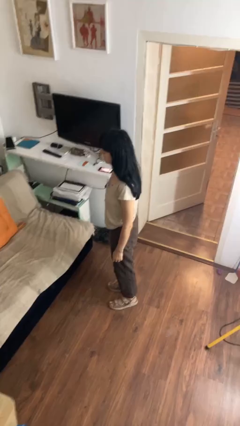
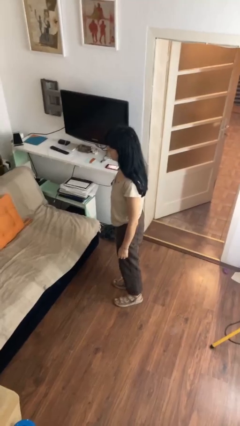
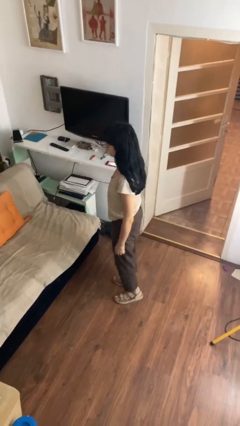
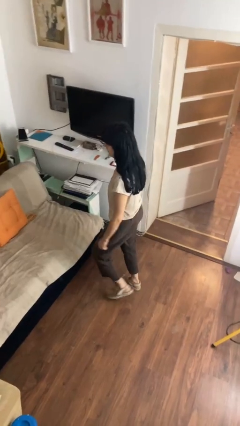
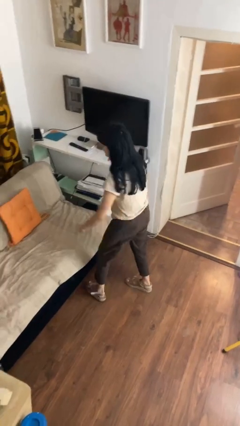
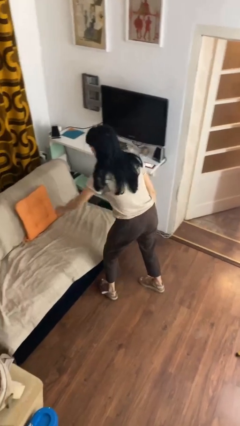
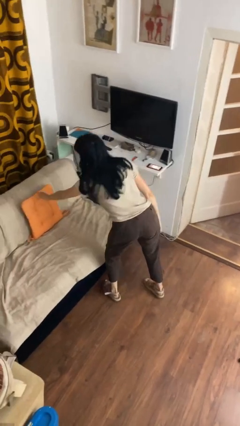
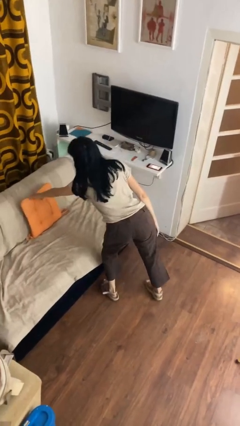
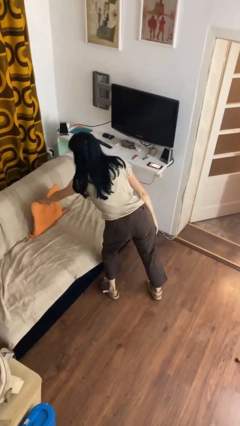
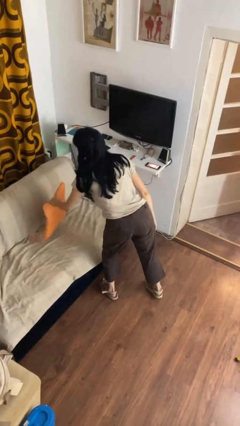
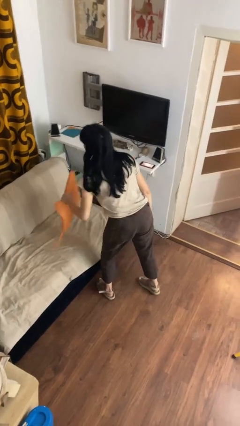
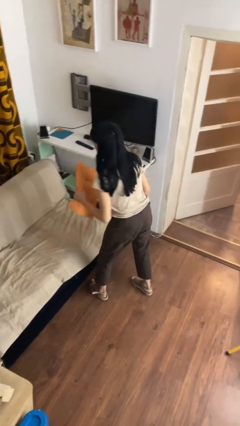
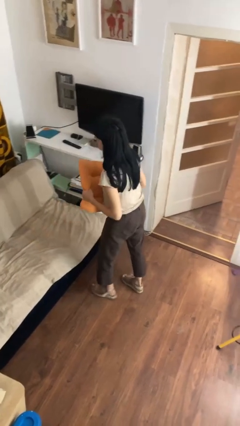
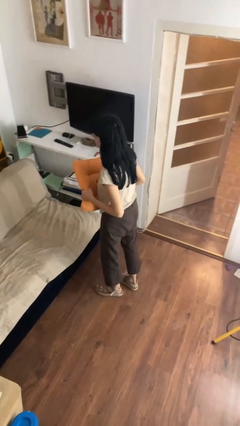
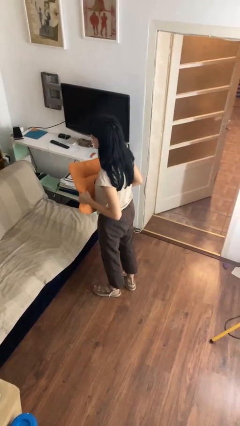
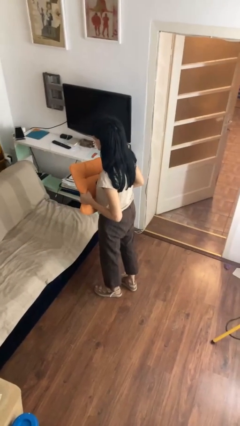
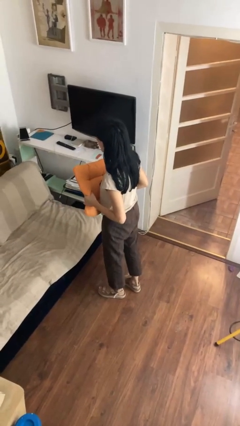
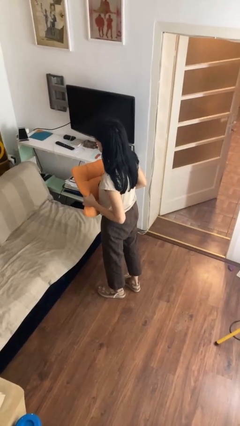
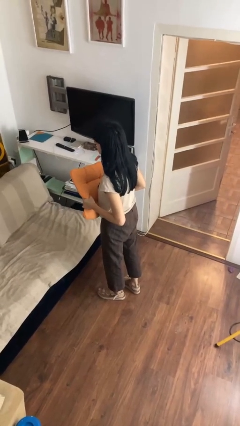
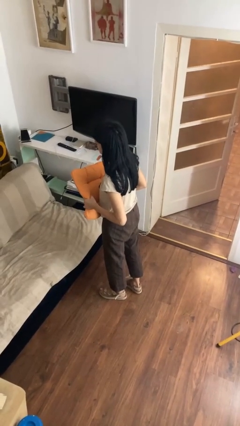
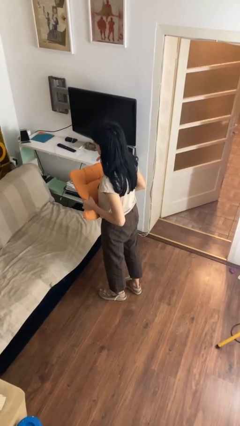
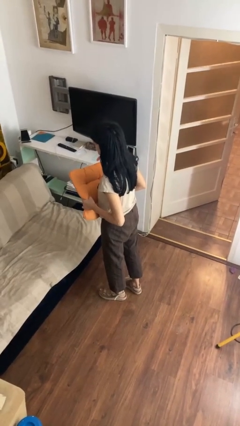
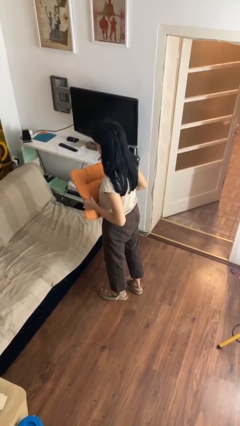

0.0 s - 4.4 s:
person picks up object from couch

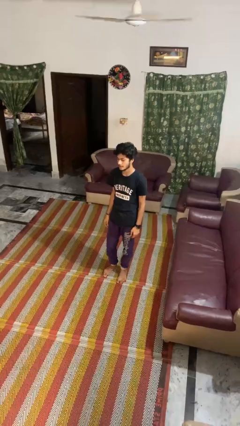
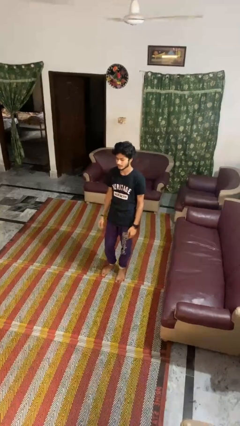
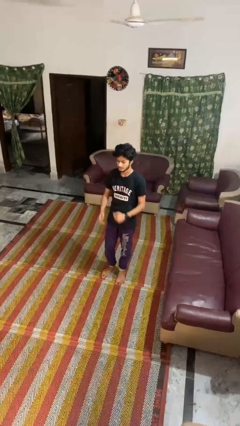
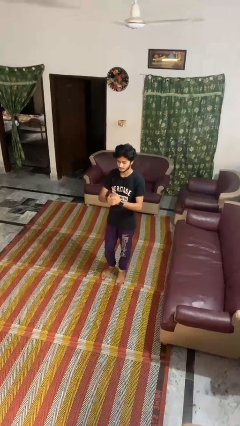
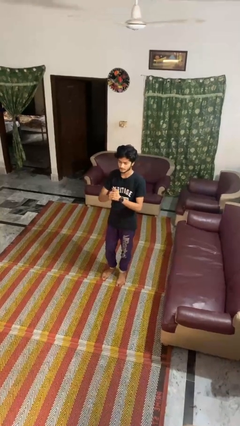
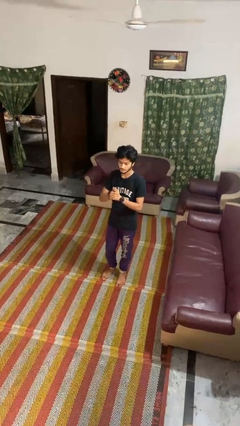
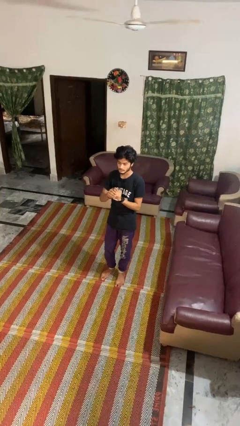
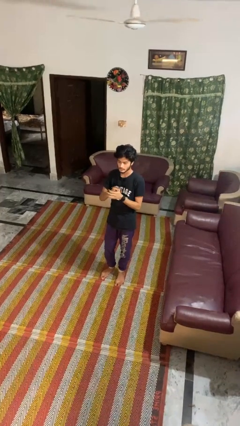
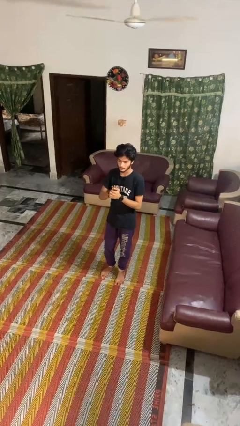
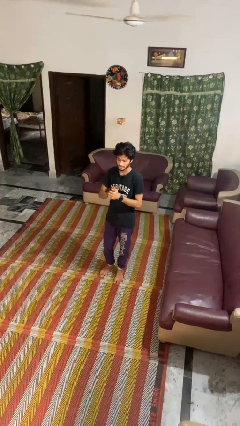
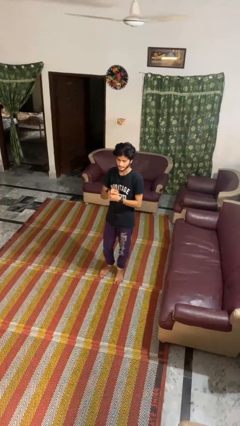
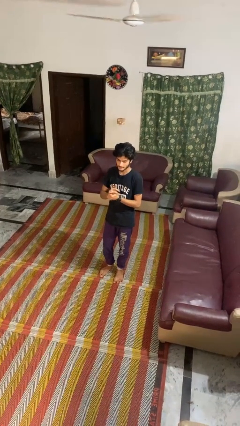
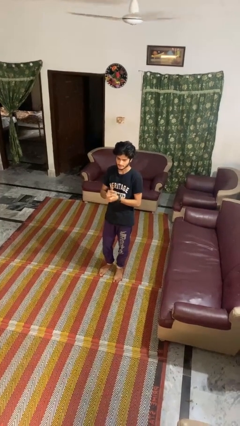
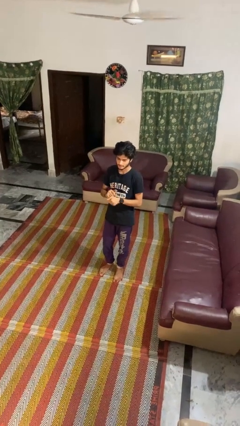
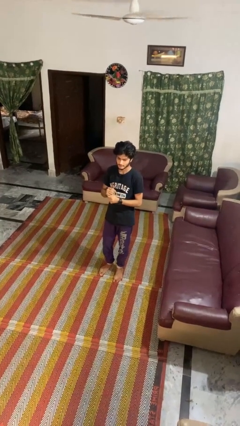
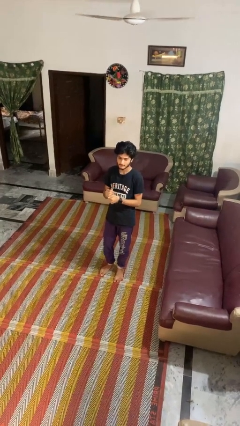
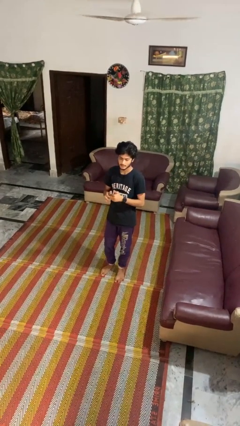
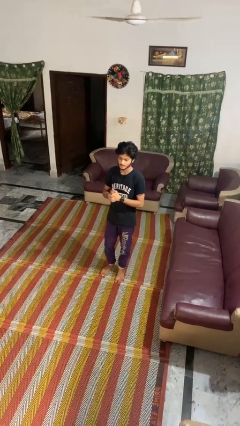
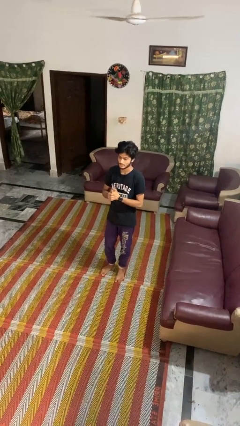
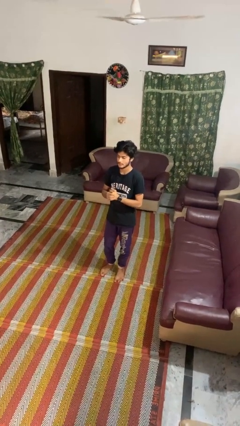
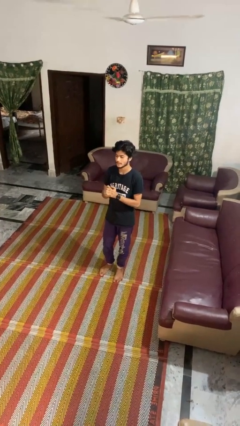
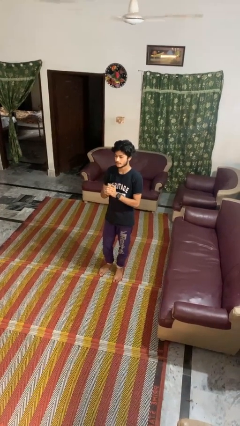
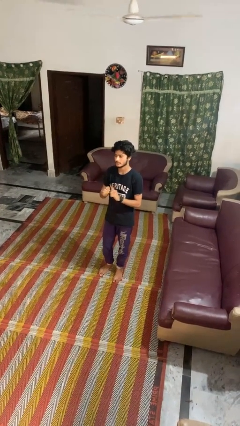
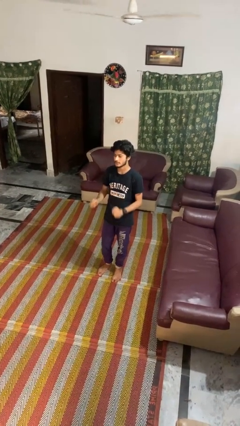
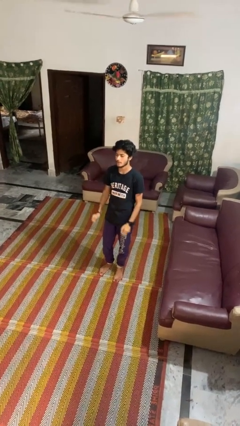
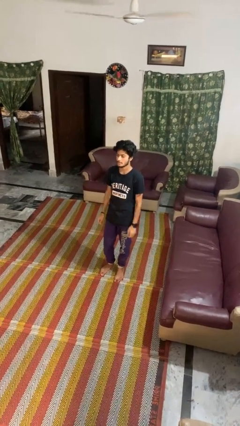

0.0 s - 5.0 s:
person cracks knuckles

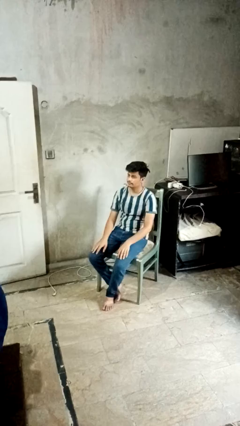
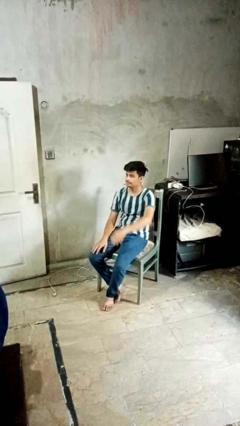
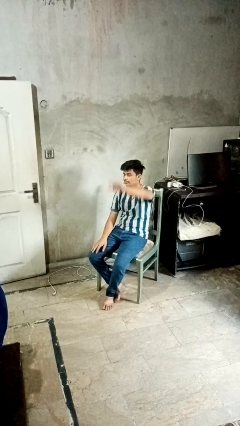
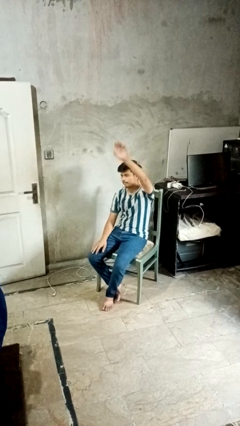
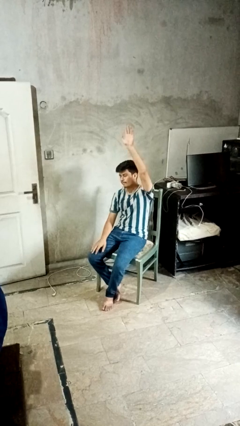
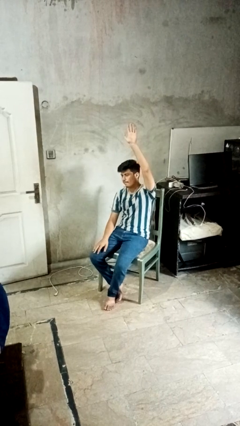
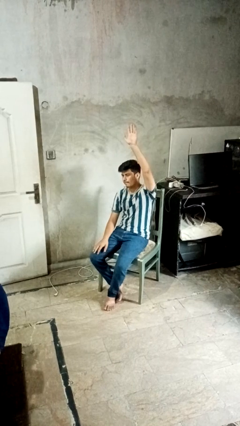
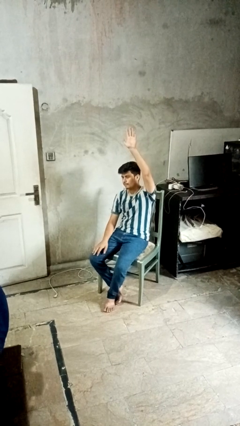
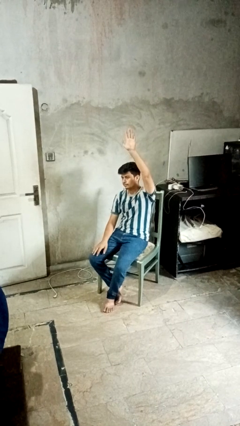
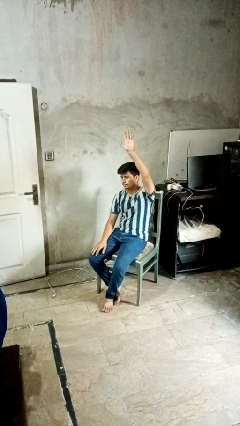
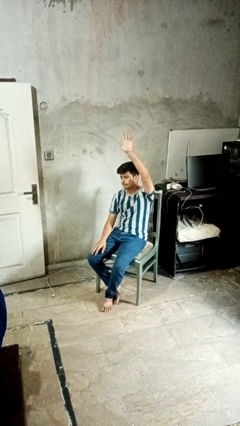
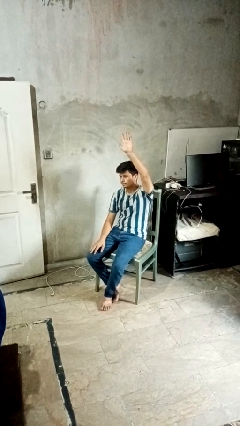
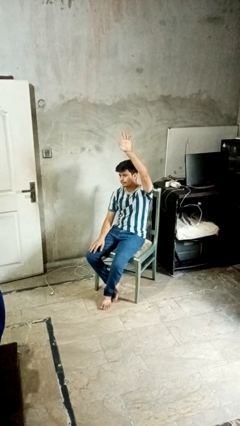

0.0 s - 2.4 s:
person gestures raise hand

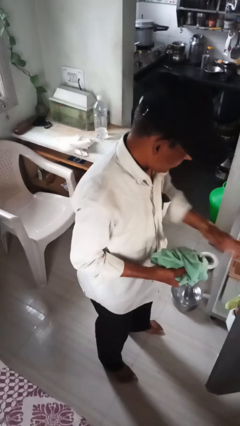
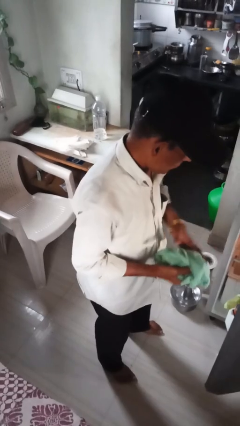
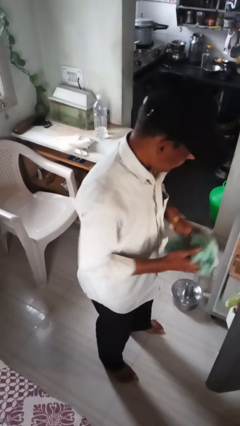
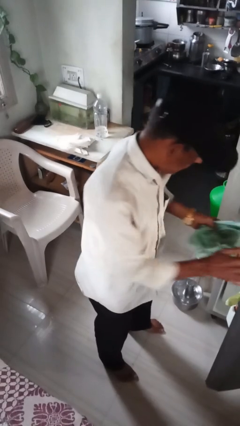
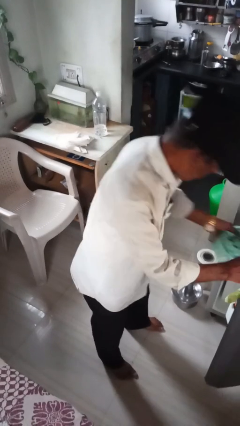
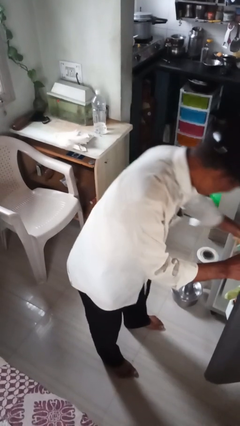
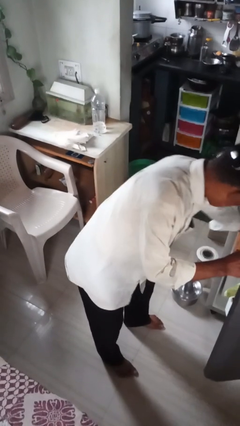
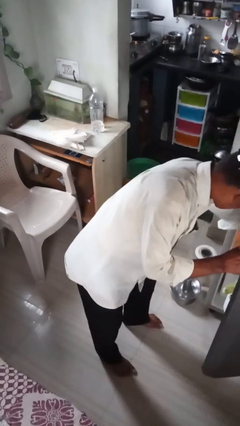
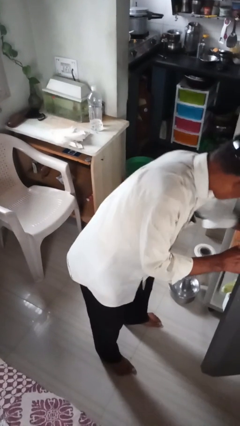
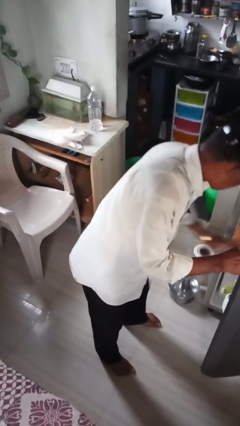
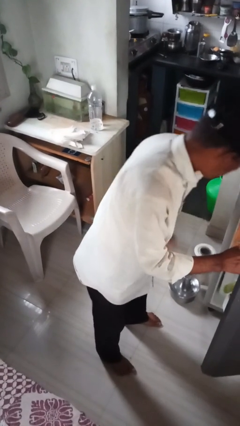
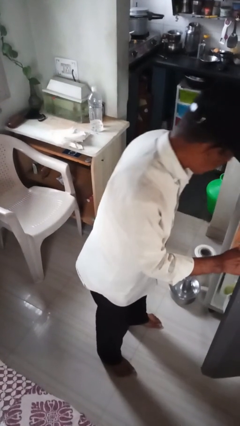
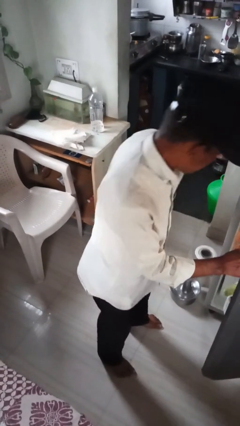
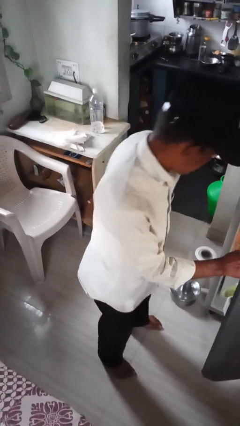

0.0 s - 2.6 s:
person loads clotheswasher

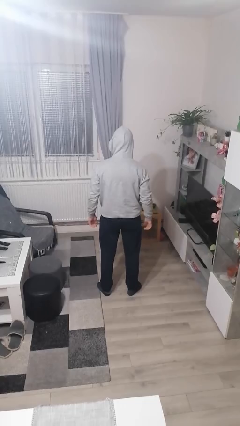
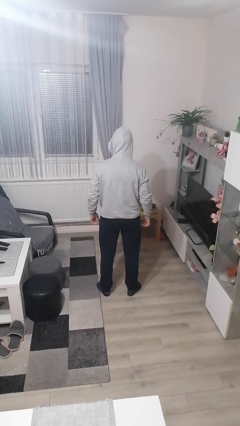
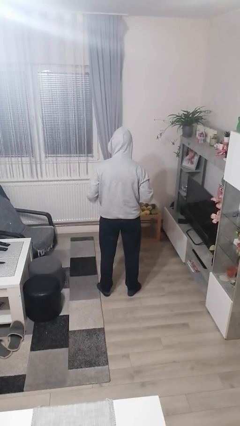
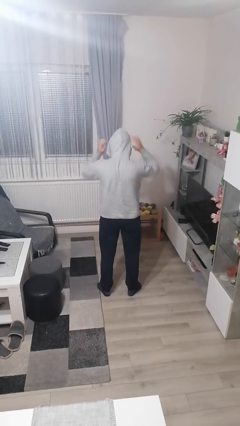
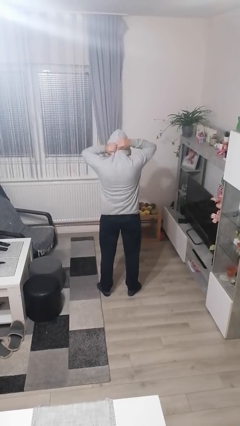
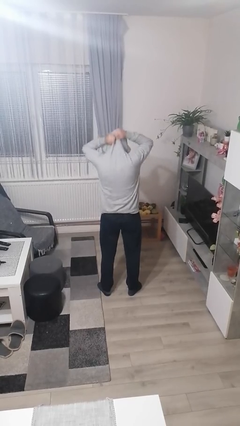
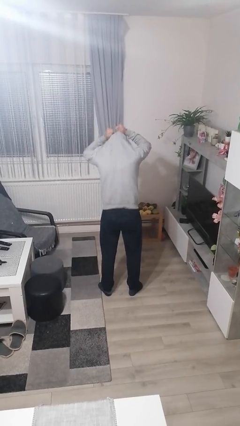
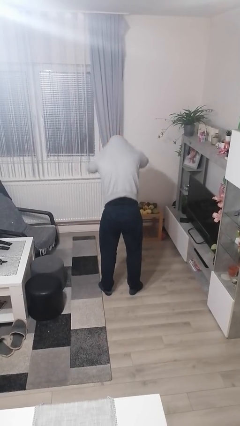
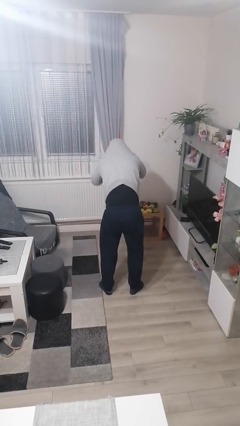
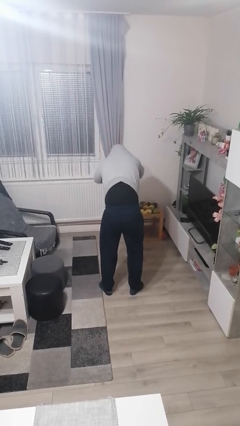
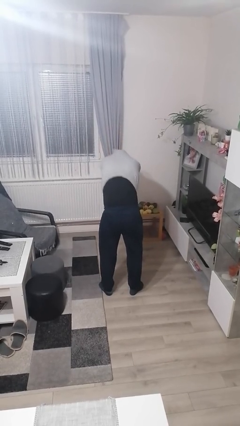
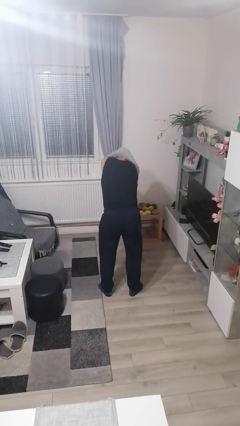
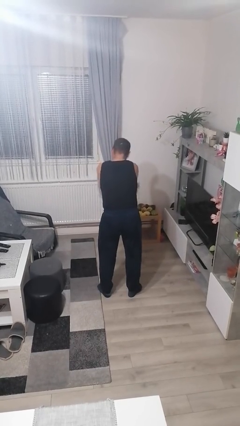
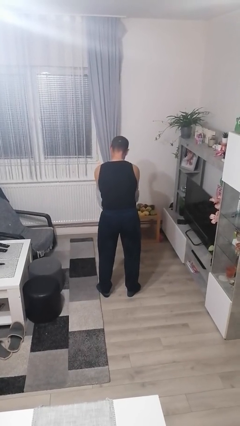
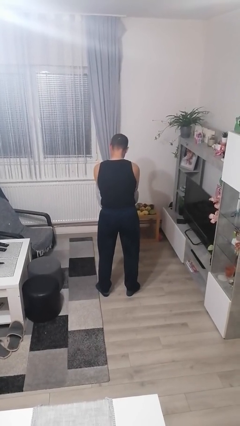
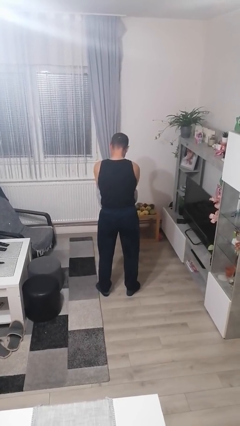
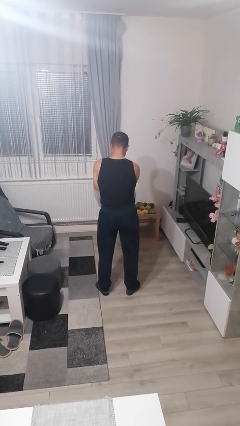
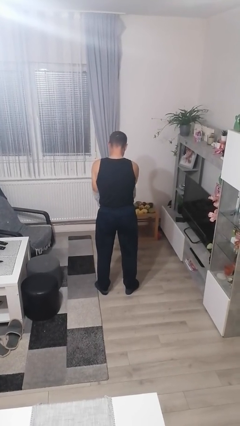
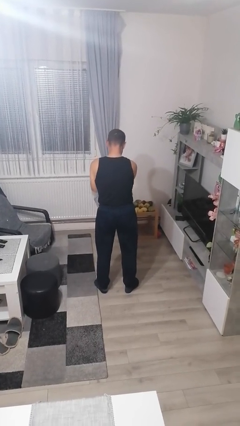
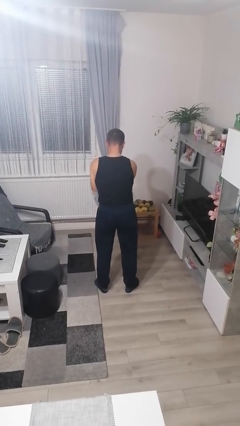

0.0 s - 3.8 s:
person takes off hoodie
